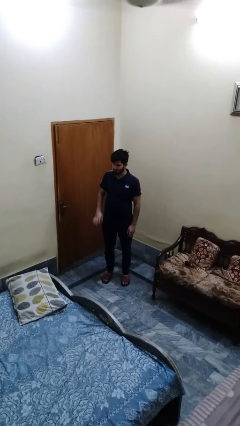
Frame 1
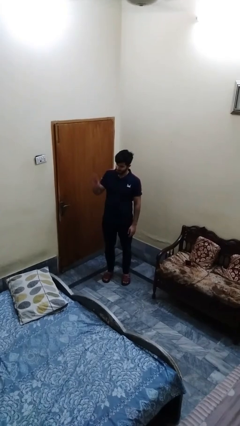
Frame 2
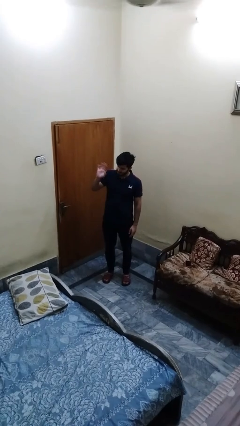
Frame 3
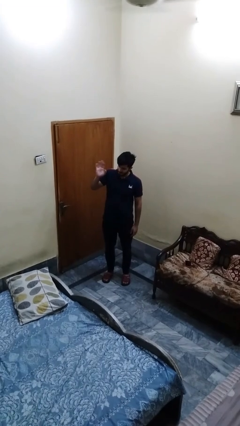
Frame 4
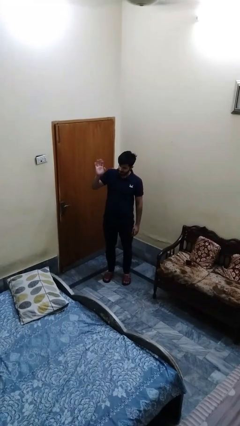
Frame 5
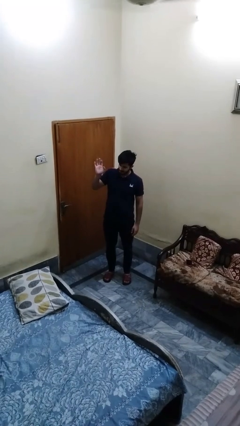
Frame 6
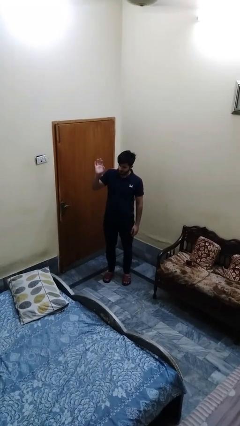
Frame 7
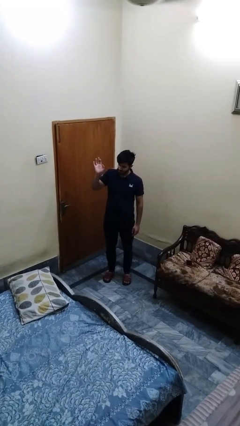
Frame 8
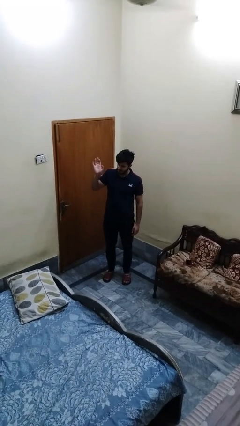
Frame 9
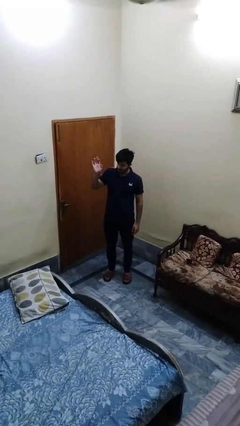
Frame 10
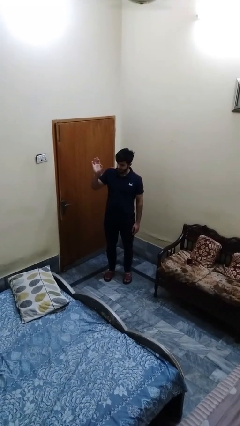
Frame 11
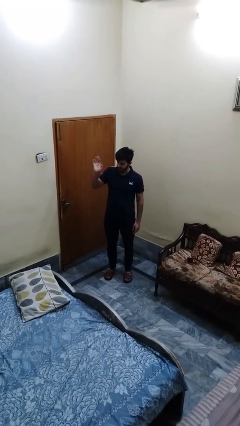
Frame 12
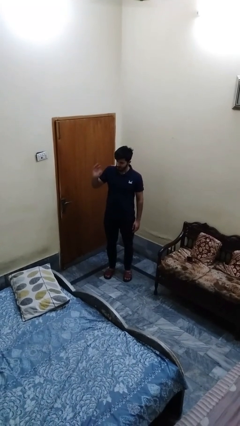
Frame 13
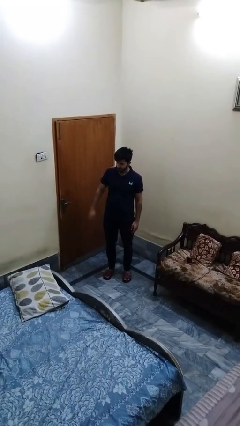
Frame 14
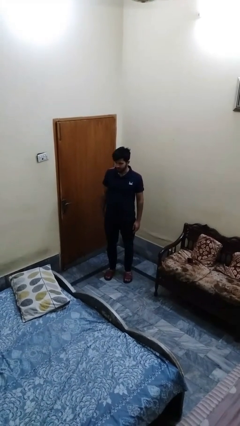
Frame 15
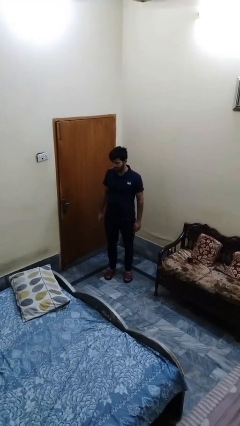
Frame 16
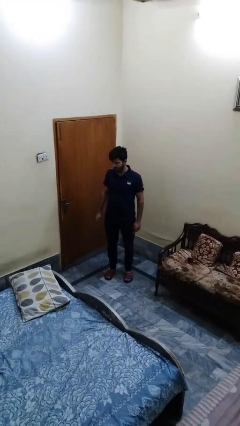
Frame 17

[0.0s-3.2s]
person waves at person

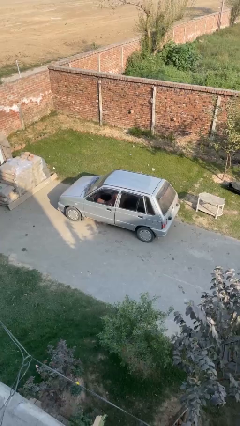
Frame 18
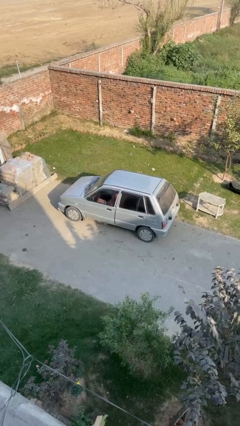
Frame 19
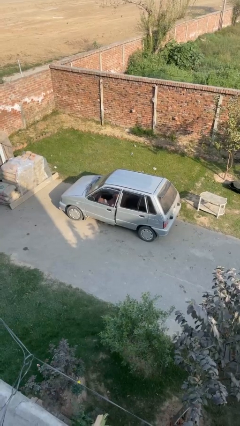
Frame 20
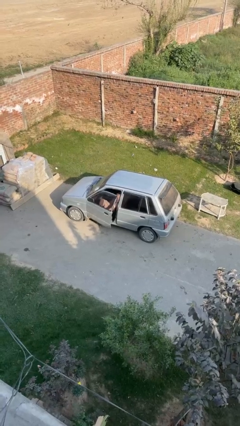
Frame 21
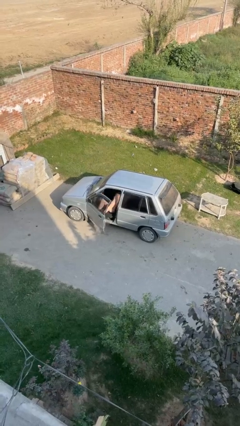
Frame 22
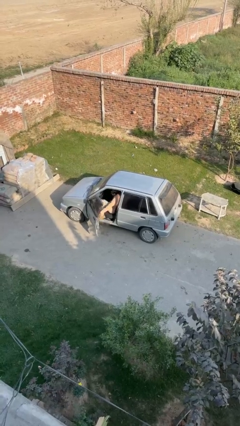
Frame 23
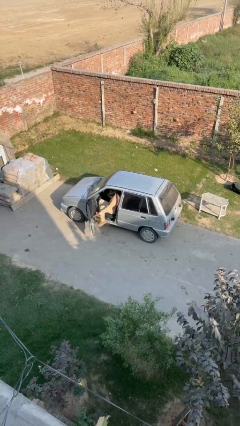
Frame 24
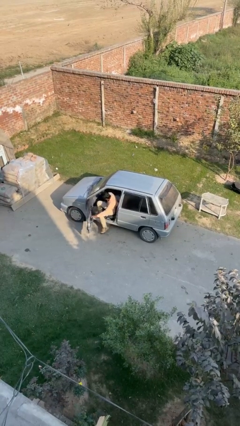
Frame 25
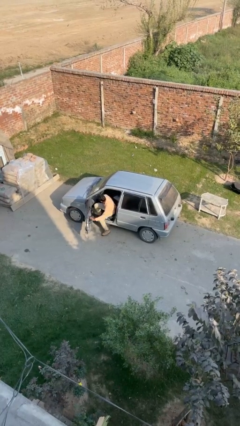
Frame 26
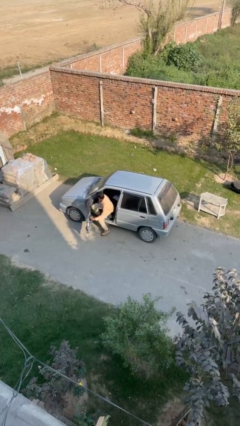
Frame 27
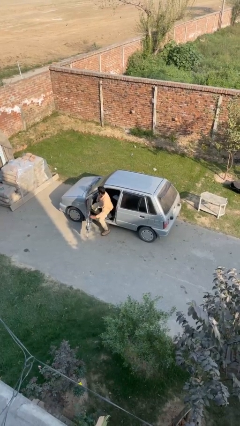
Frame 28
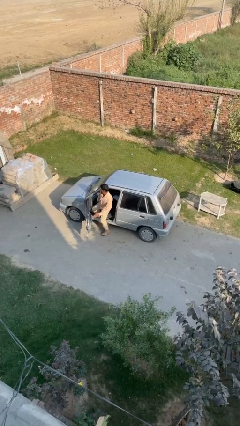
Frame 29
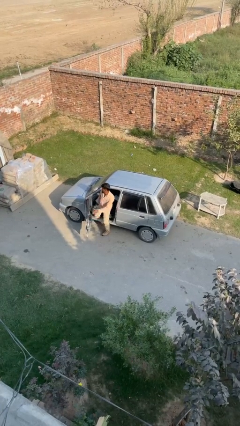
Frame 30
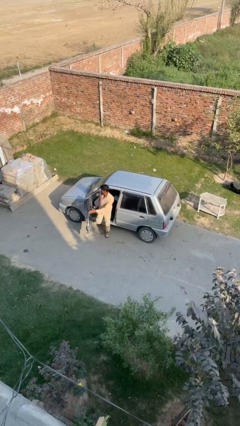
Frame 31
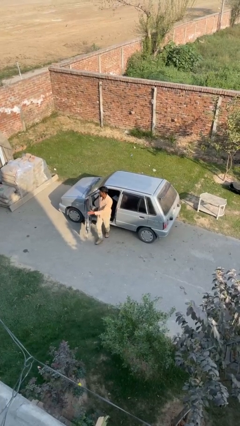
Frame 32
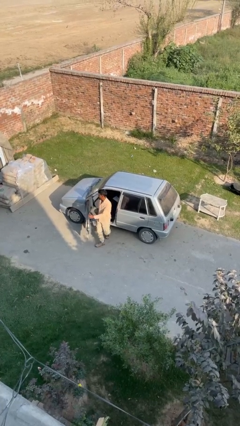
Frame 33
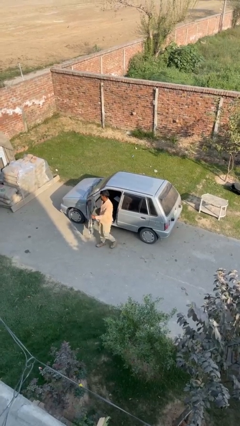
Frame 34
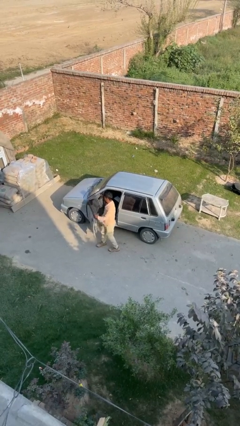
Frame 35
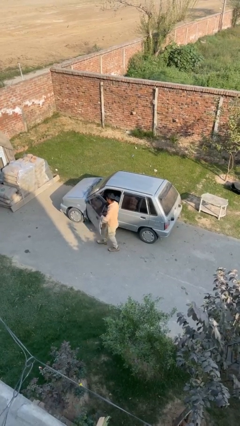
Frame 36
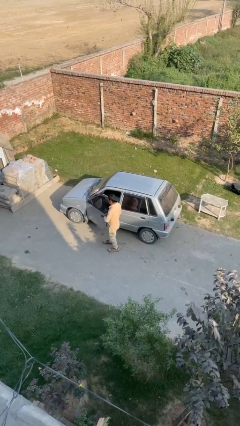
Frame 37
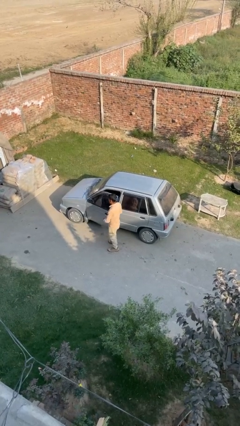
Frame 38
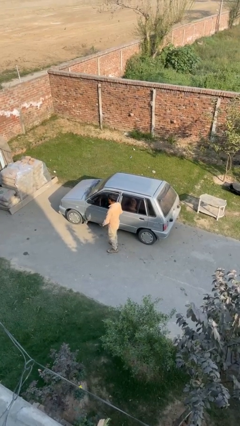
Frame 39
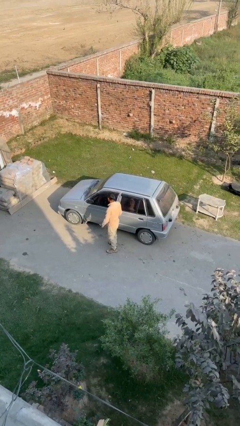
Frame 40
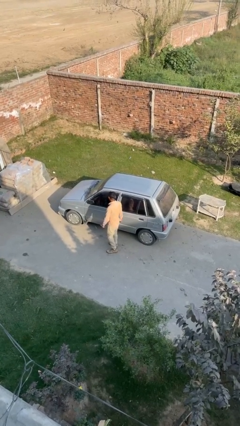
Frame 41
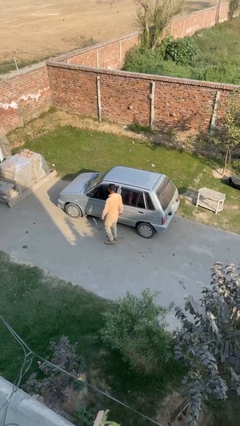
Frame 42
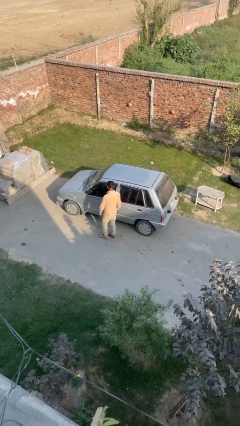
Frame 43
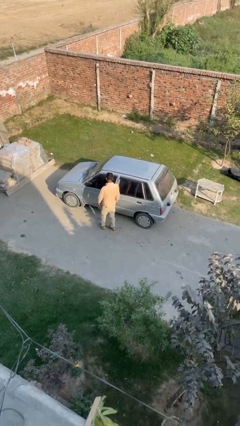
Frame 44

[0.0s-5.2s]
car drops off person

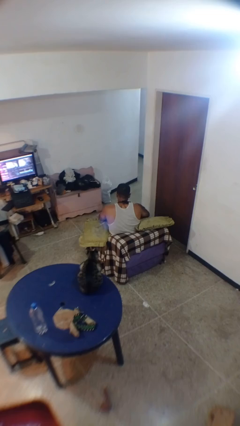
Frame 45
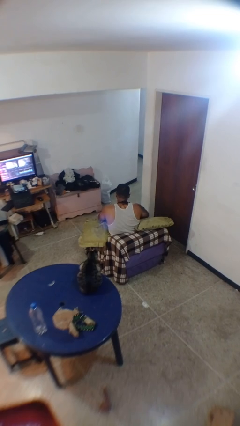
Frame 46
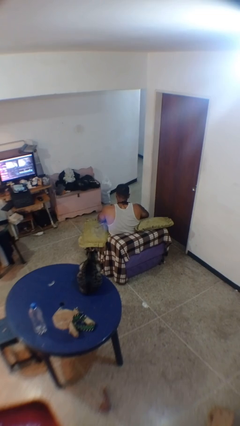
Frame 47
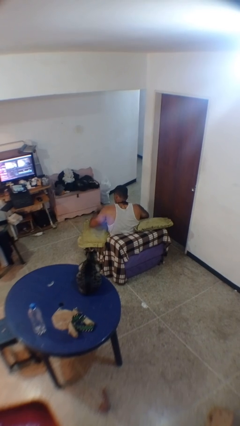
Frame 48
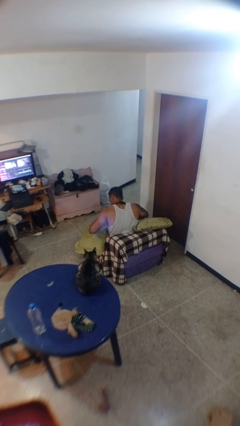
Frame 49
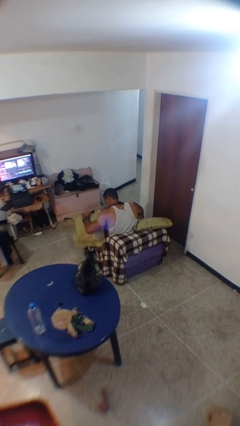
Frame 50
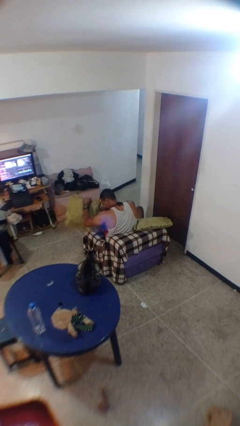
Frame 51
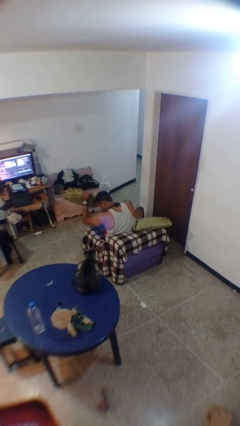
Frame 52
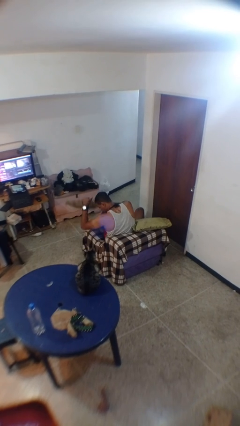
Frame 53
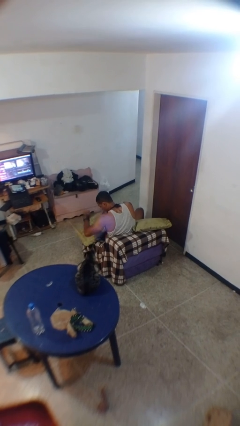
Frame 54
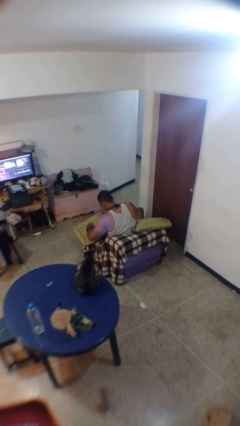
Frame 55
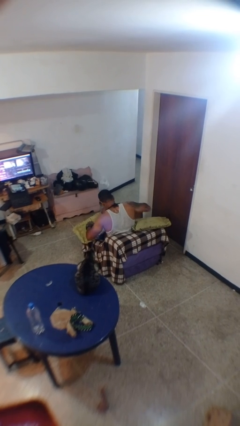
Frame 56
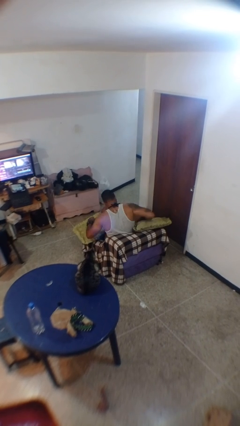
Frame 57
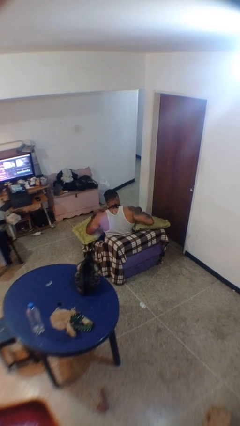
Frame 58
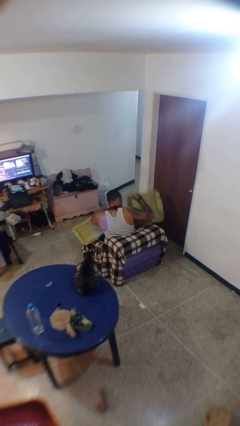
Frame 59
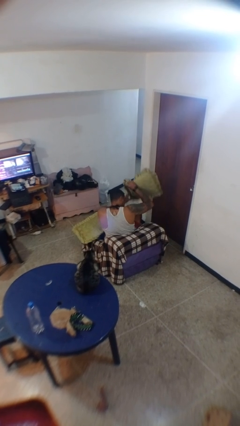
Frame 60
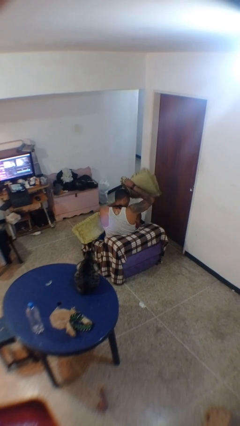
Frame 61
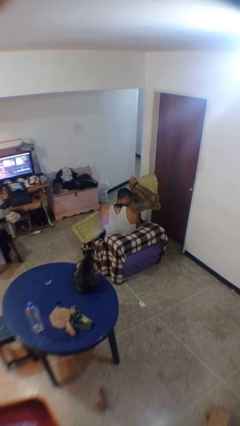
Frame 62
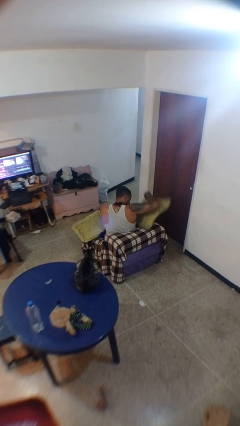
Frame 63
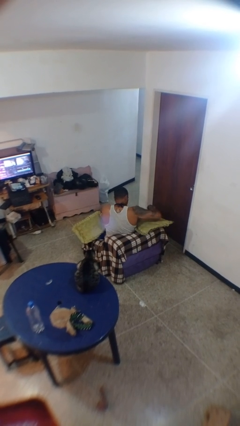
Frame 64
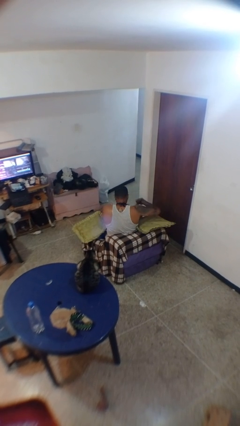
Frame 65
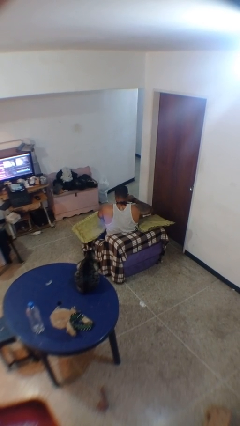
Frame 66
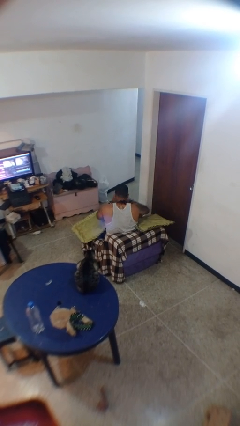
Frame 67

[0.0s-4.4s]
person searches in couch

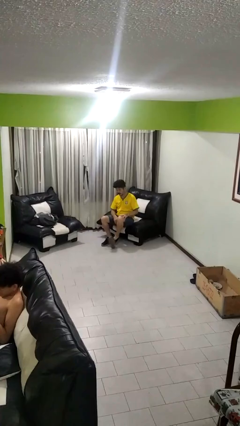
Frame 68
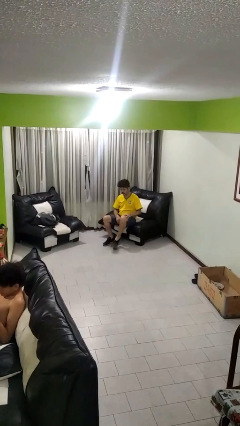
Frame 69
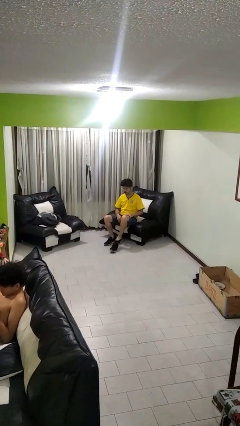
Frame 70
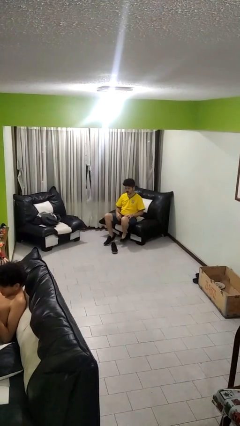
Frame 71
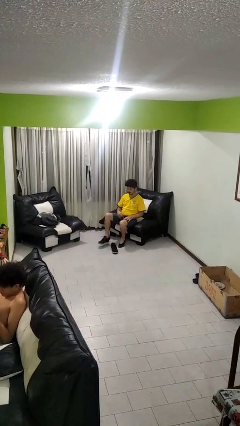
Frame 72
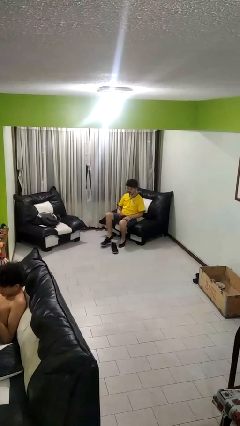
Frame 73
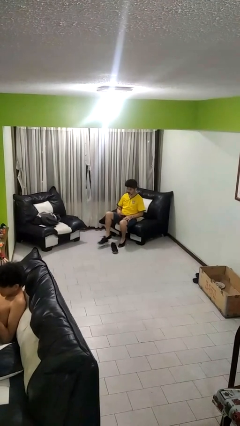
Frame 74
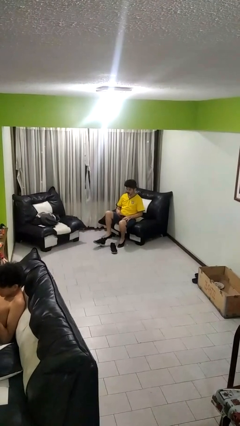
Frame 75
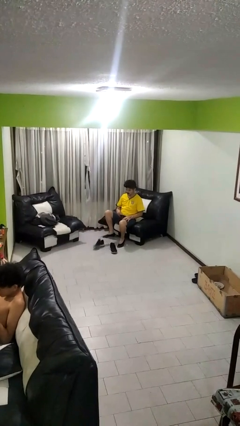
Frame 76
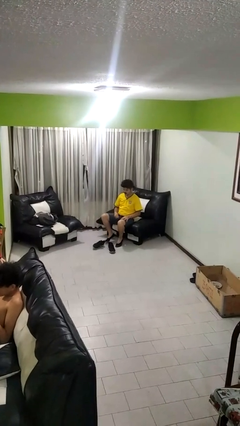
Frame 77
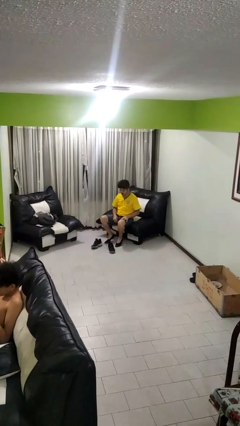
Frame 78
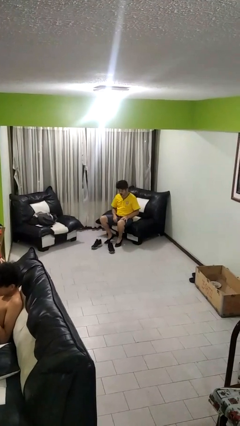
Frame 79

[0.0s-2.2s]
person takes off shoes

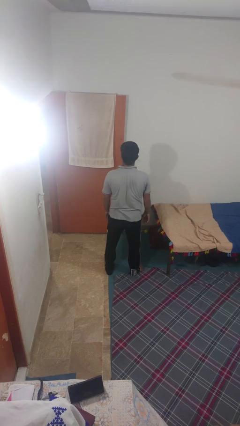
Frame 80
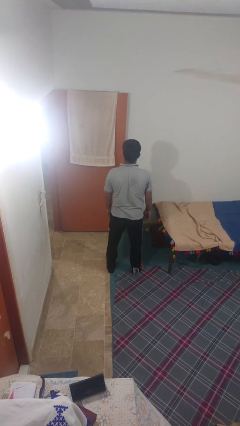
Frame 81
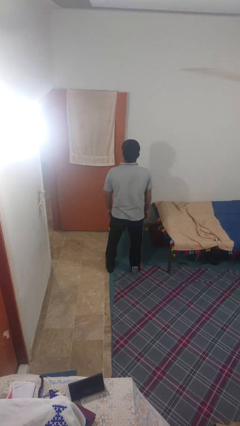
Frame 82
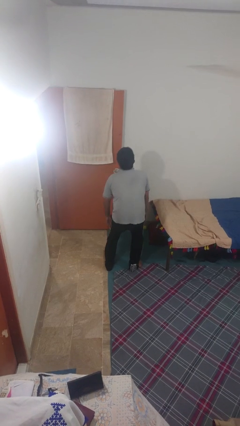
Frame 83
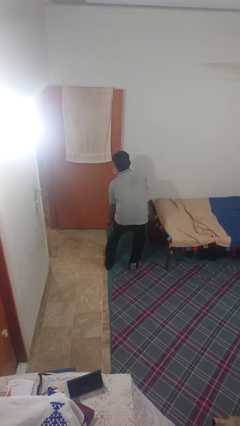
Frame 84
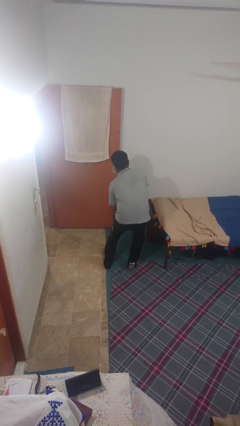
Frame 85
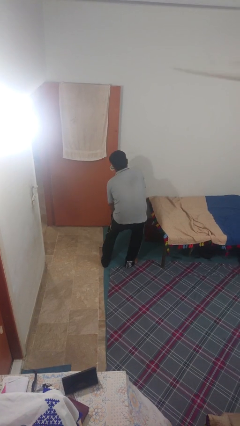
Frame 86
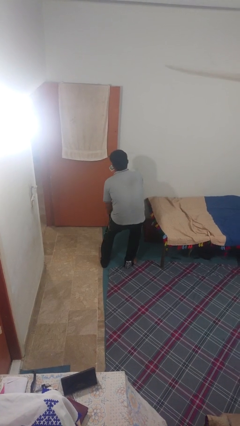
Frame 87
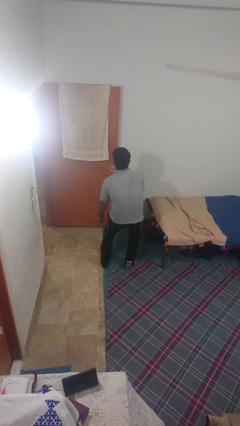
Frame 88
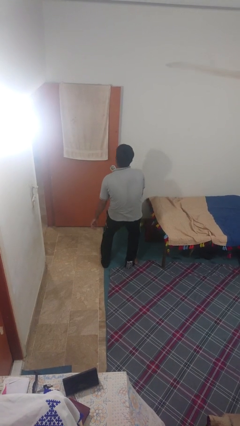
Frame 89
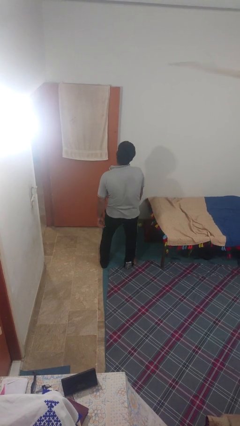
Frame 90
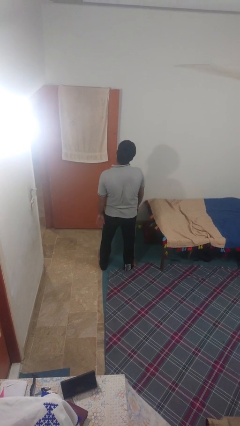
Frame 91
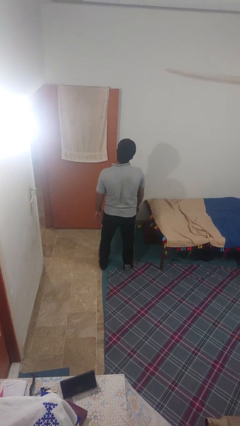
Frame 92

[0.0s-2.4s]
person gestures hang loose

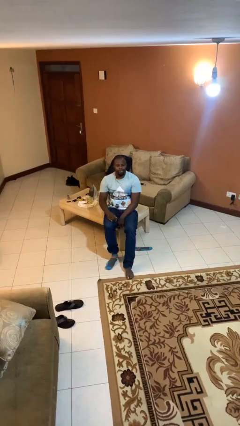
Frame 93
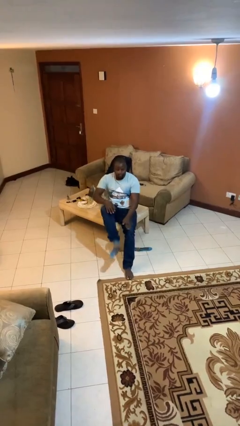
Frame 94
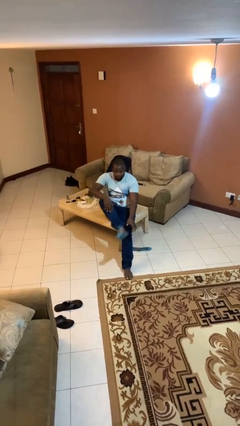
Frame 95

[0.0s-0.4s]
person takes off socks
